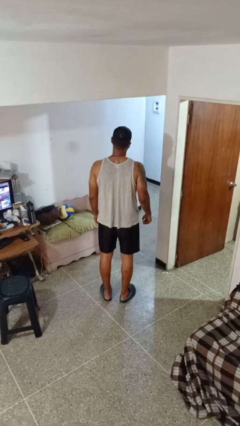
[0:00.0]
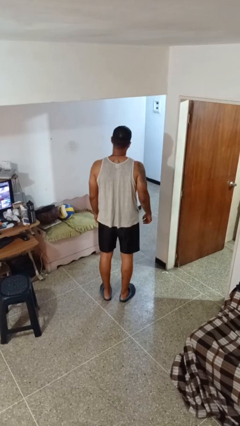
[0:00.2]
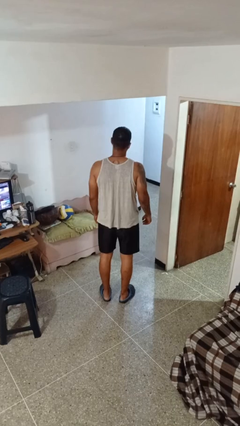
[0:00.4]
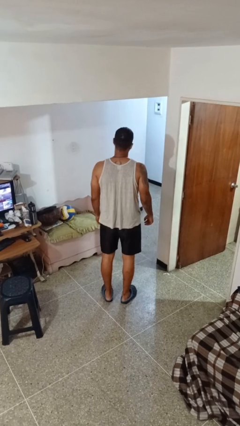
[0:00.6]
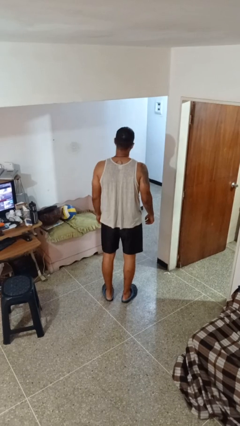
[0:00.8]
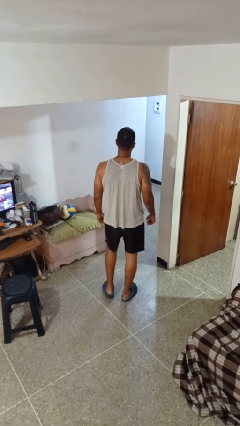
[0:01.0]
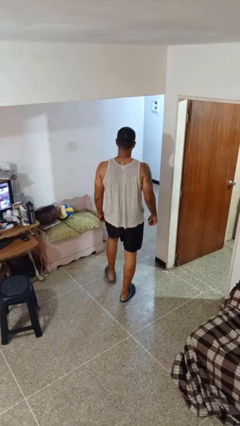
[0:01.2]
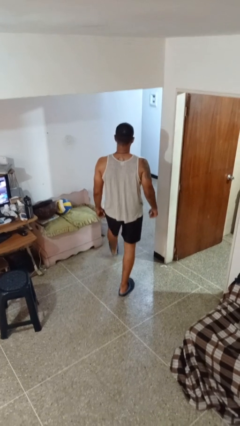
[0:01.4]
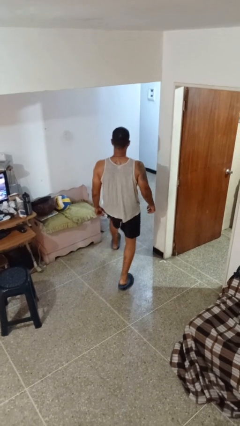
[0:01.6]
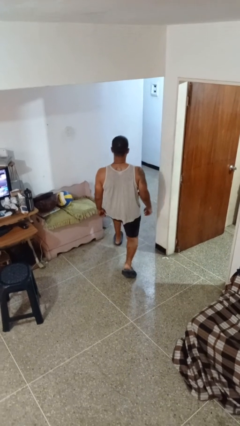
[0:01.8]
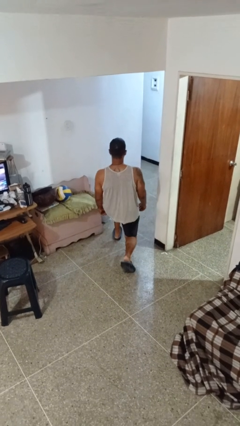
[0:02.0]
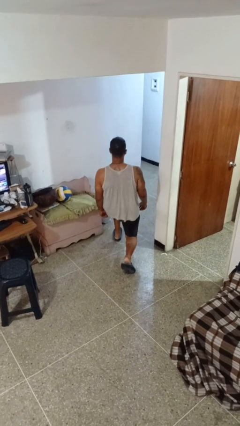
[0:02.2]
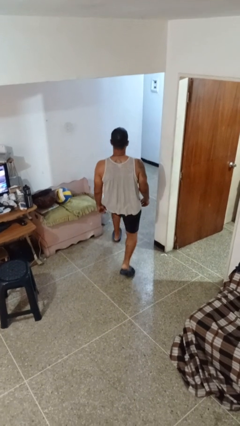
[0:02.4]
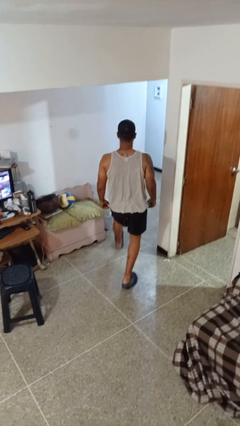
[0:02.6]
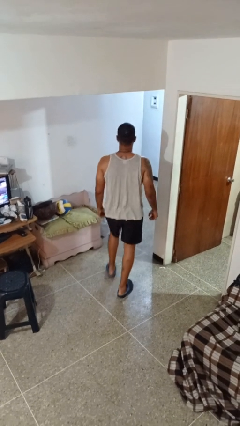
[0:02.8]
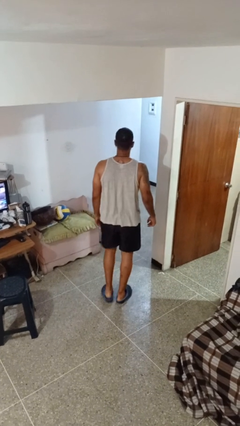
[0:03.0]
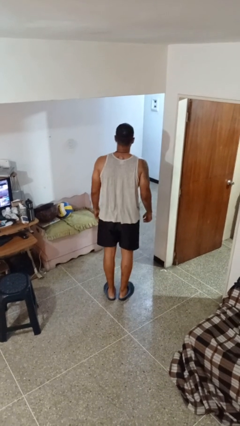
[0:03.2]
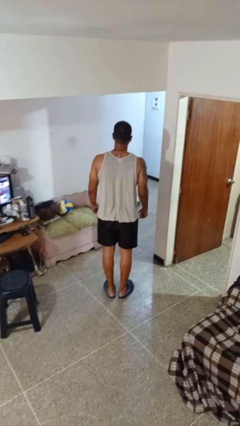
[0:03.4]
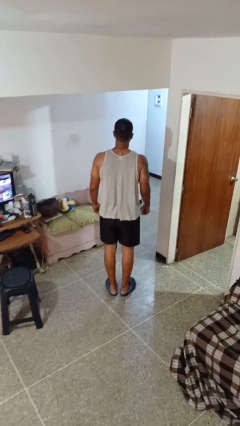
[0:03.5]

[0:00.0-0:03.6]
person exercises with lunges

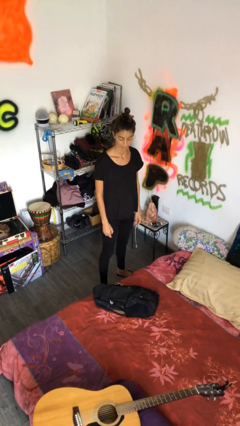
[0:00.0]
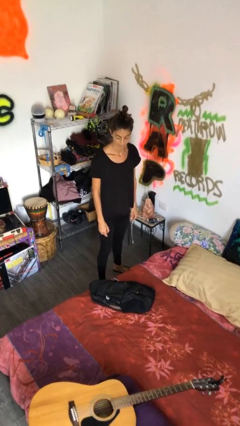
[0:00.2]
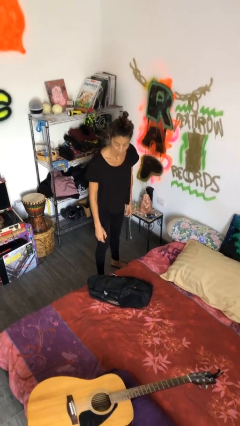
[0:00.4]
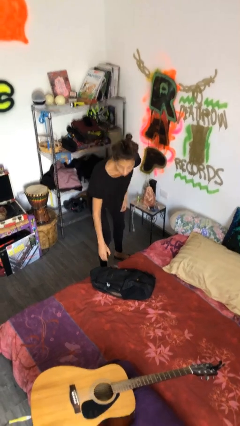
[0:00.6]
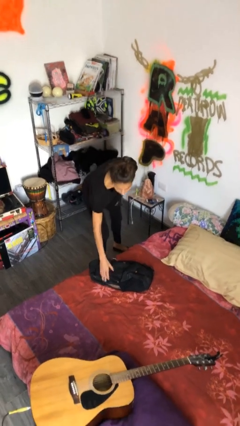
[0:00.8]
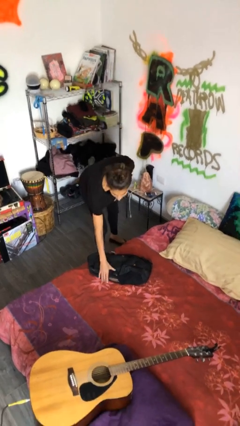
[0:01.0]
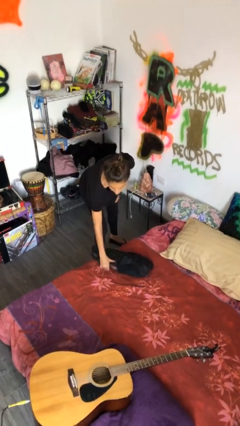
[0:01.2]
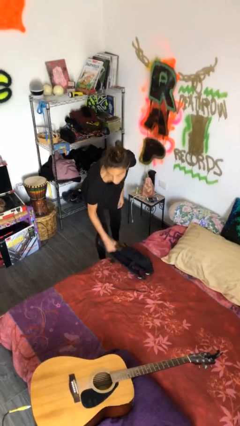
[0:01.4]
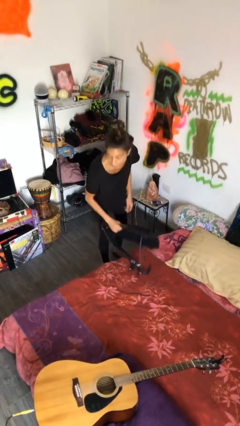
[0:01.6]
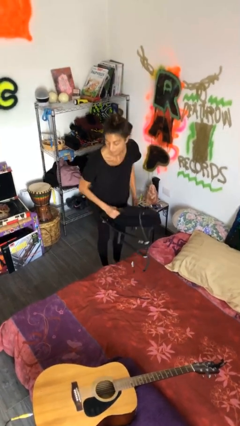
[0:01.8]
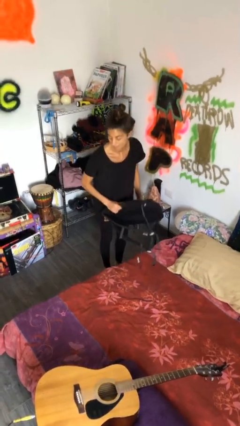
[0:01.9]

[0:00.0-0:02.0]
person picks up object from bed

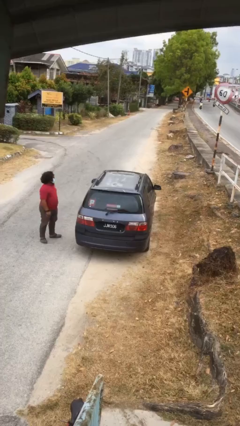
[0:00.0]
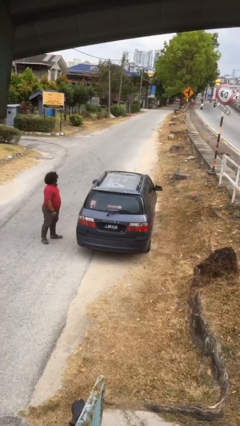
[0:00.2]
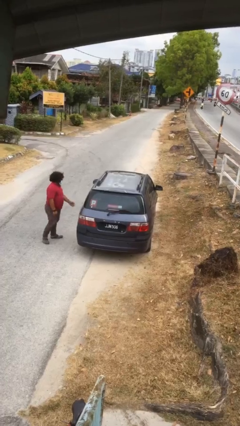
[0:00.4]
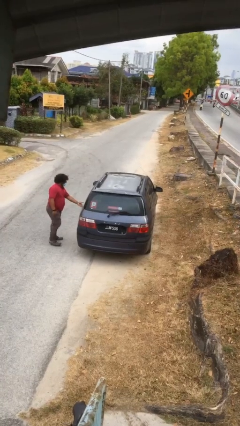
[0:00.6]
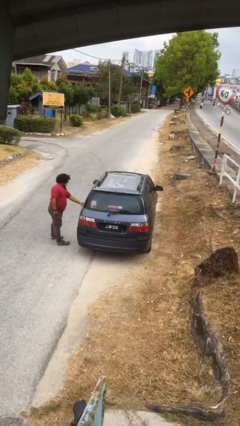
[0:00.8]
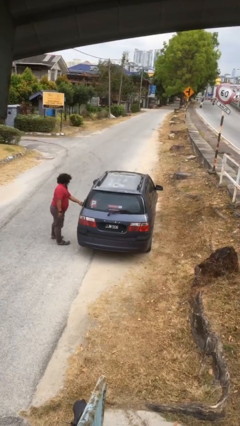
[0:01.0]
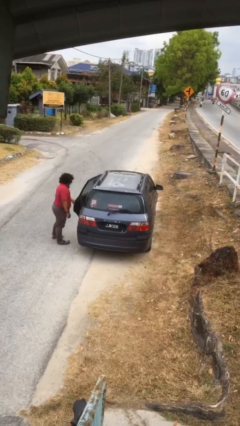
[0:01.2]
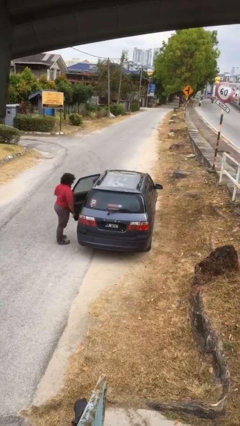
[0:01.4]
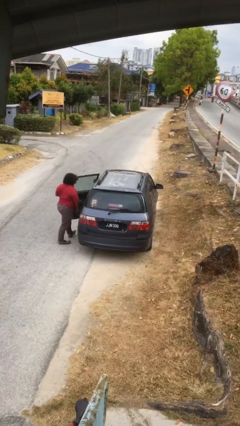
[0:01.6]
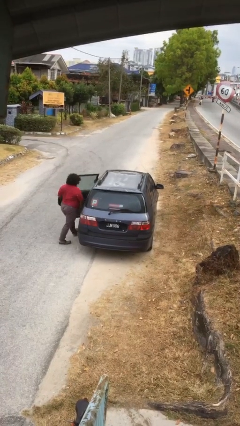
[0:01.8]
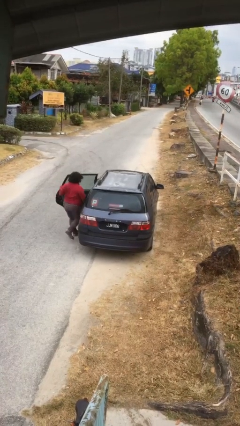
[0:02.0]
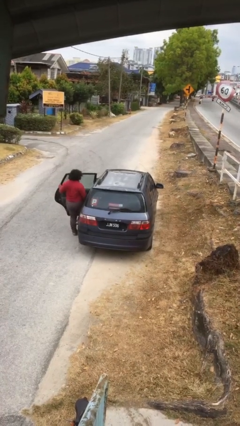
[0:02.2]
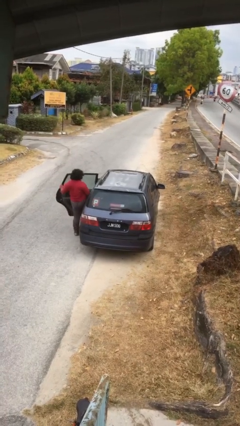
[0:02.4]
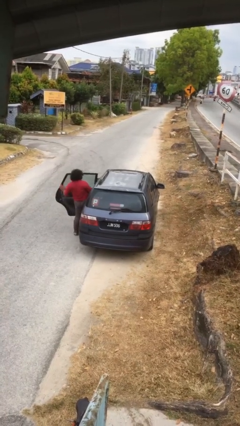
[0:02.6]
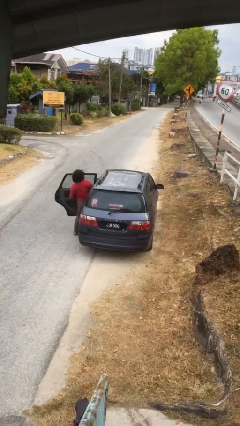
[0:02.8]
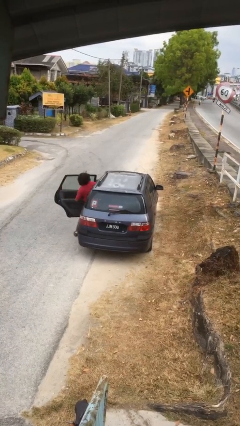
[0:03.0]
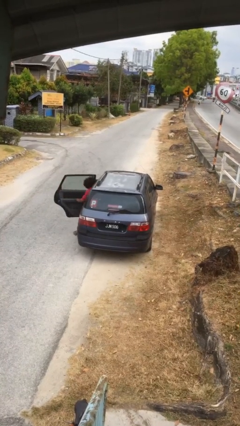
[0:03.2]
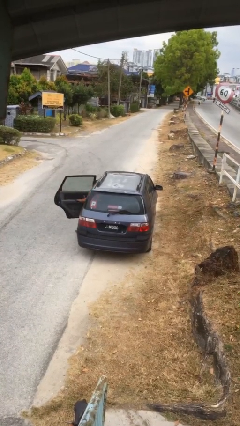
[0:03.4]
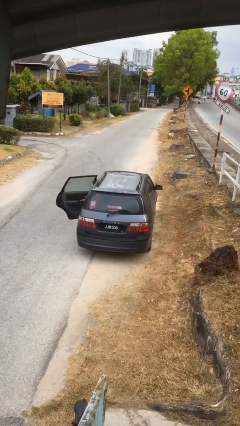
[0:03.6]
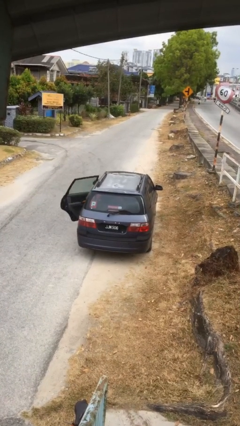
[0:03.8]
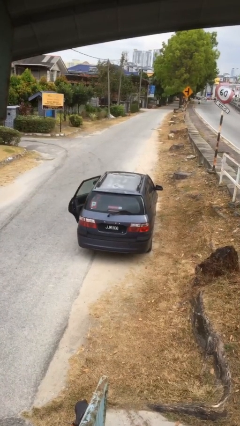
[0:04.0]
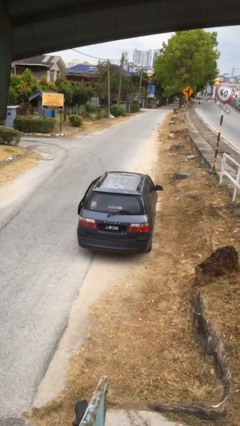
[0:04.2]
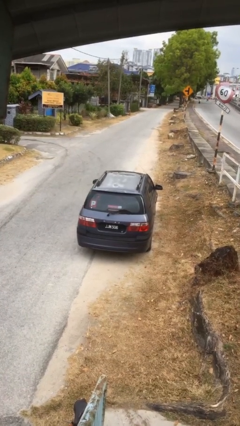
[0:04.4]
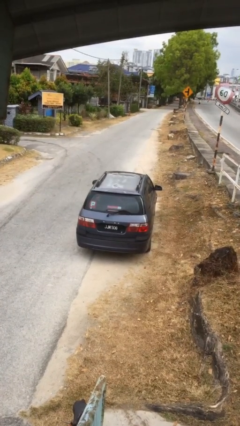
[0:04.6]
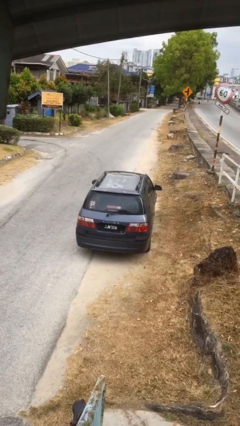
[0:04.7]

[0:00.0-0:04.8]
car picks up person

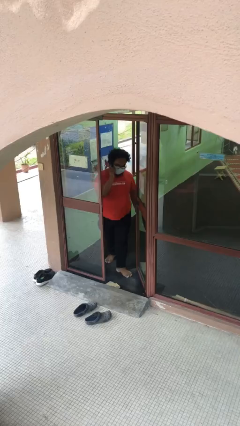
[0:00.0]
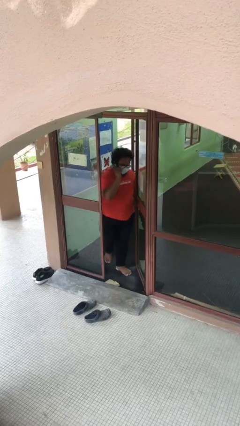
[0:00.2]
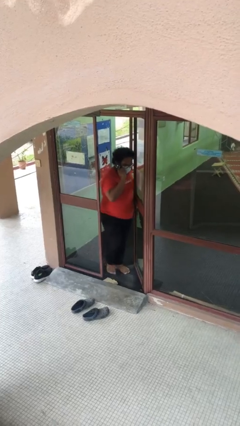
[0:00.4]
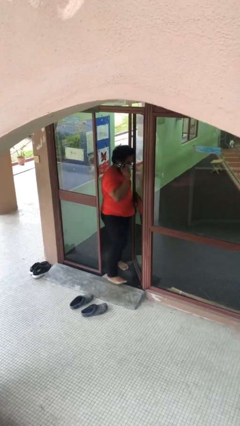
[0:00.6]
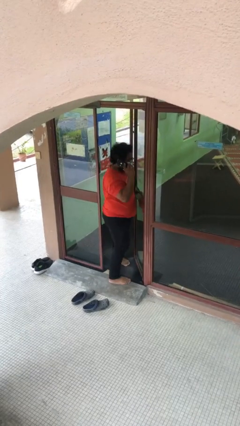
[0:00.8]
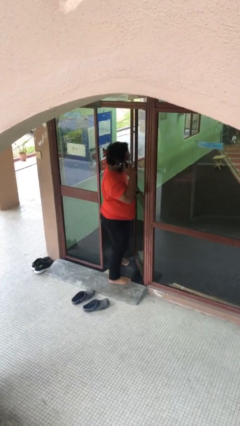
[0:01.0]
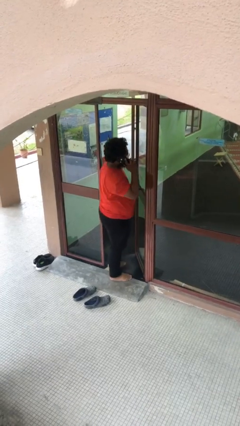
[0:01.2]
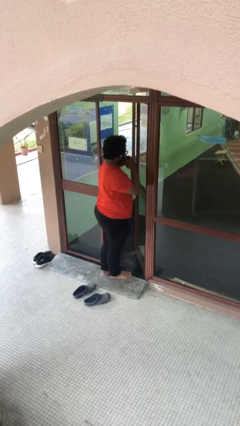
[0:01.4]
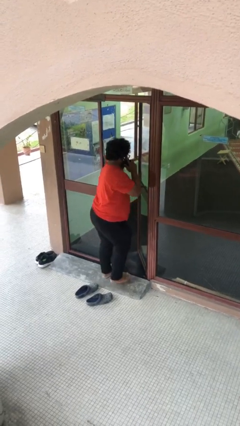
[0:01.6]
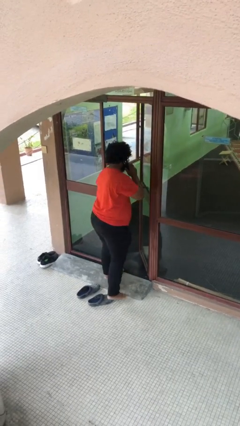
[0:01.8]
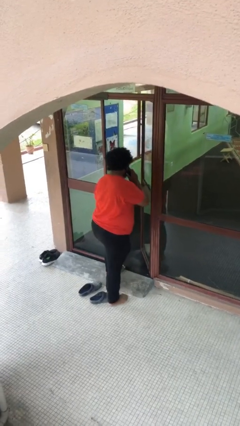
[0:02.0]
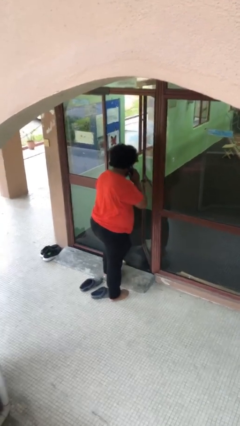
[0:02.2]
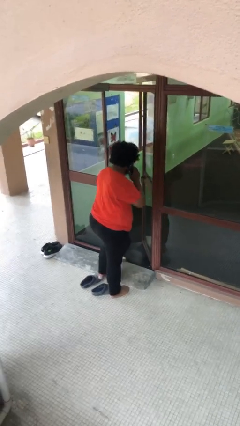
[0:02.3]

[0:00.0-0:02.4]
person enters scene through structure

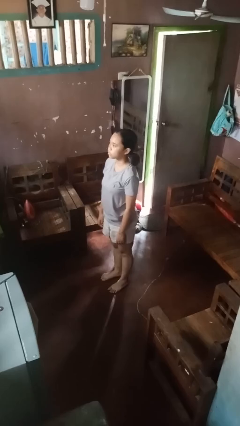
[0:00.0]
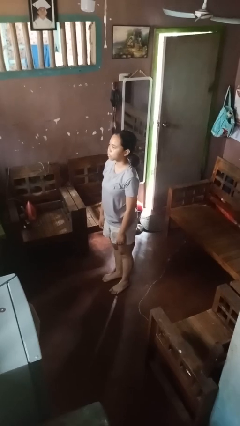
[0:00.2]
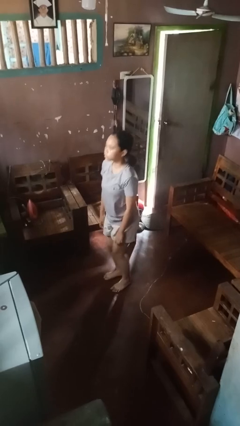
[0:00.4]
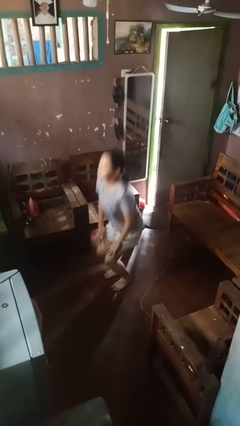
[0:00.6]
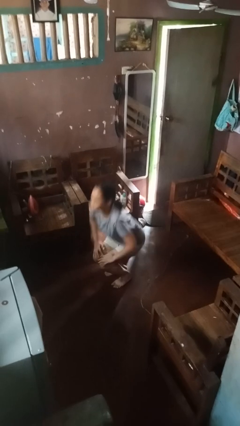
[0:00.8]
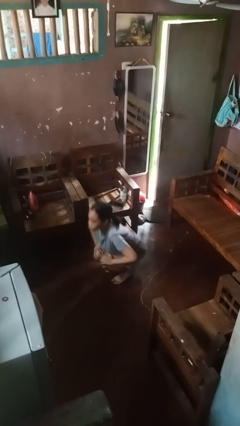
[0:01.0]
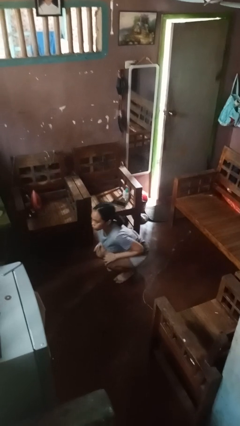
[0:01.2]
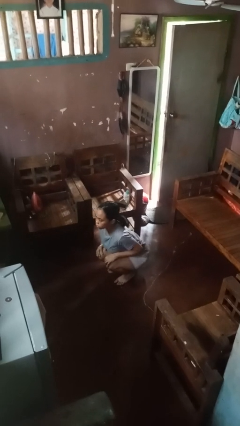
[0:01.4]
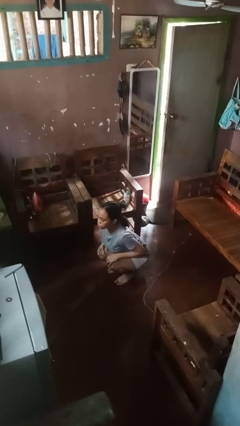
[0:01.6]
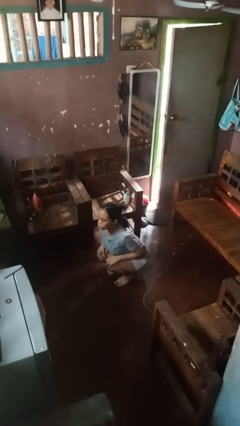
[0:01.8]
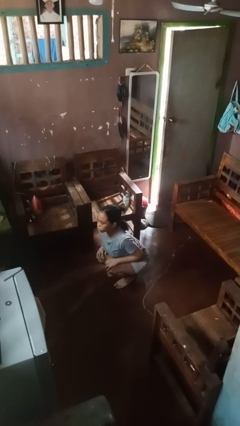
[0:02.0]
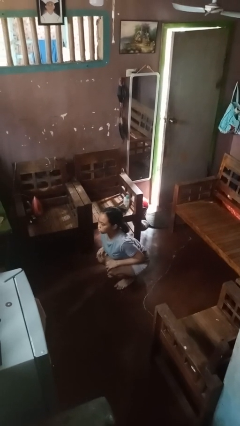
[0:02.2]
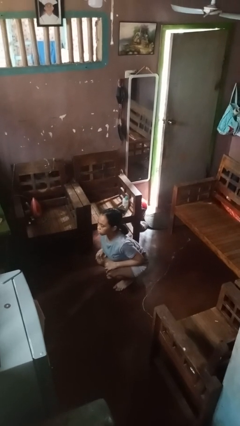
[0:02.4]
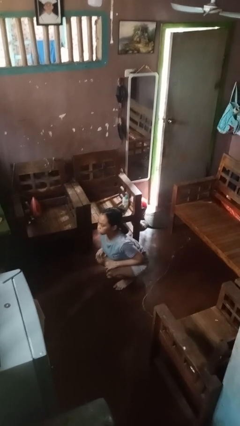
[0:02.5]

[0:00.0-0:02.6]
person squats

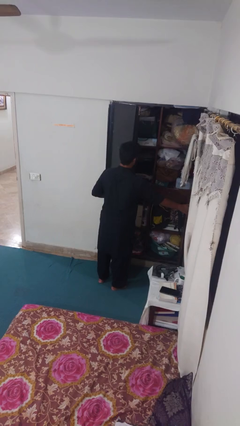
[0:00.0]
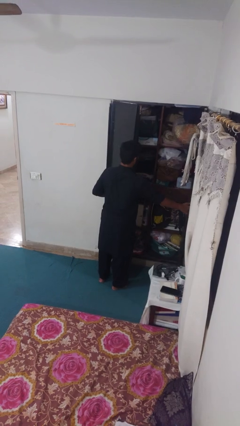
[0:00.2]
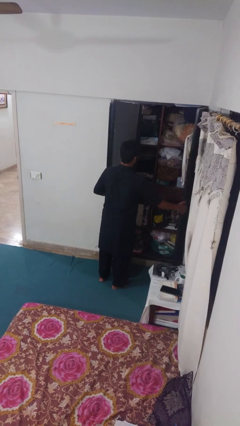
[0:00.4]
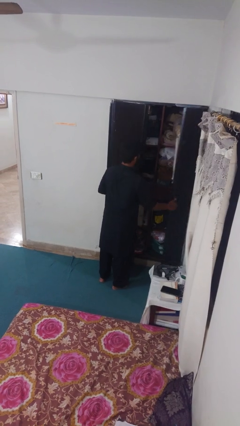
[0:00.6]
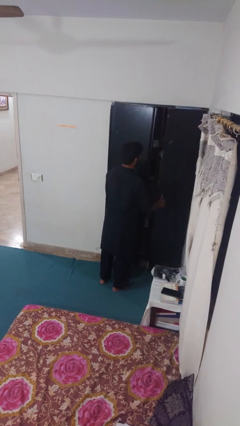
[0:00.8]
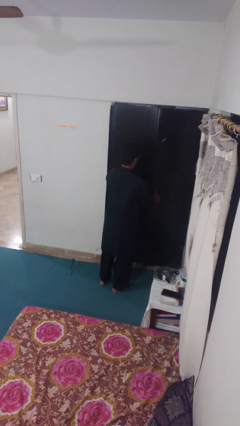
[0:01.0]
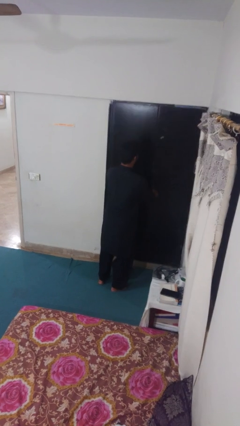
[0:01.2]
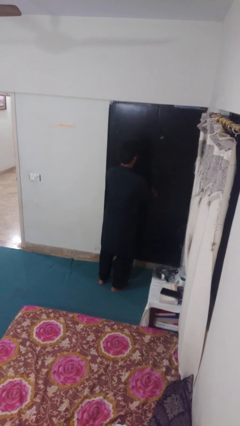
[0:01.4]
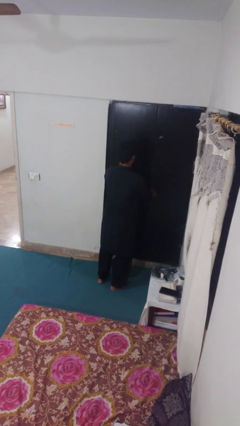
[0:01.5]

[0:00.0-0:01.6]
person closes closet door
